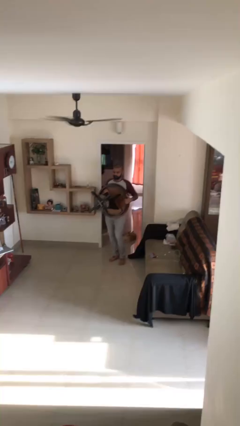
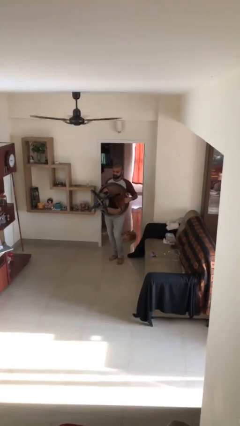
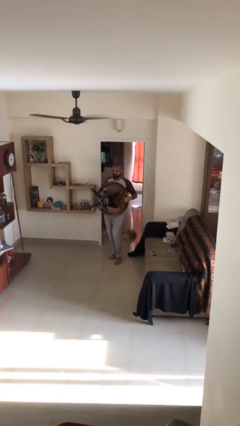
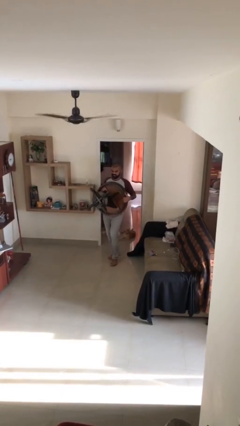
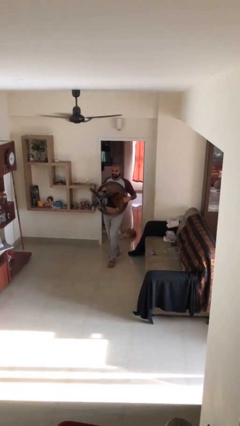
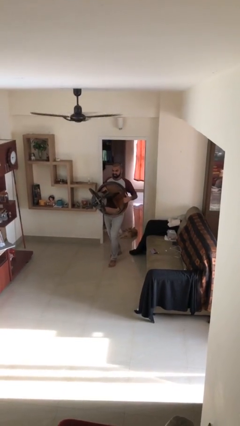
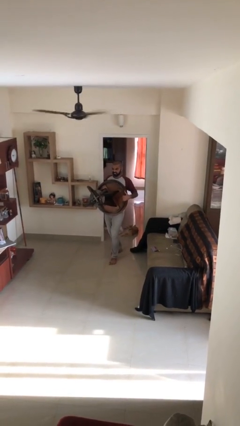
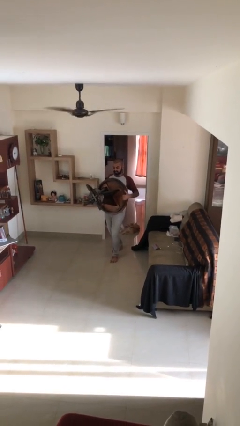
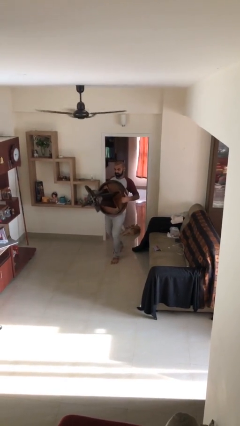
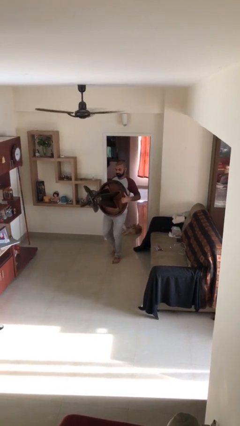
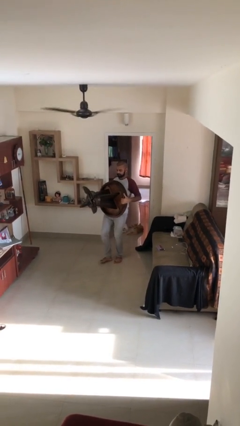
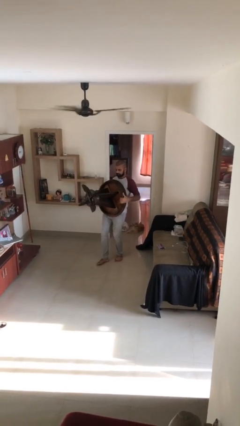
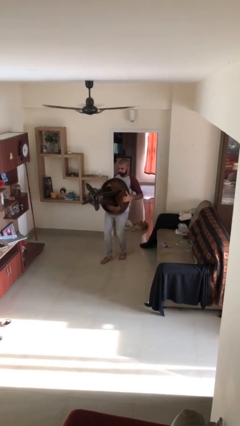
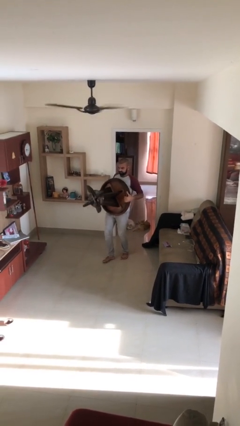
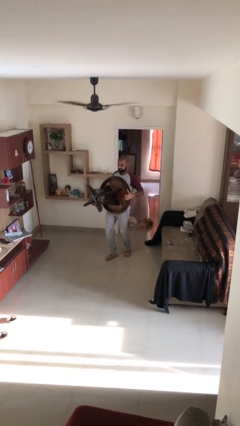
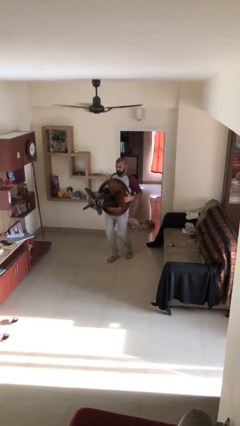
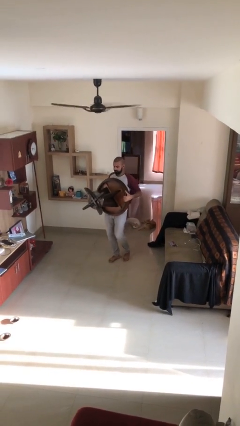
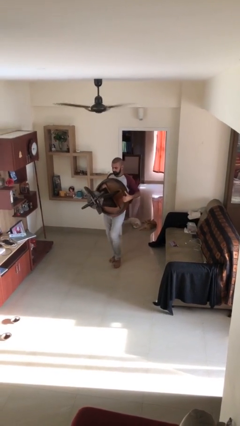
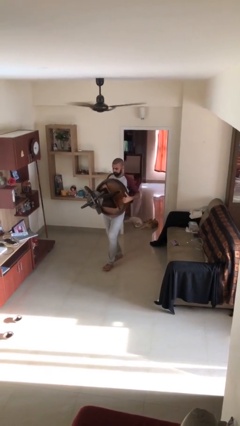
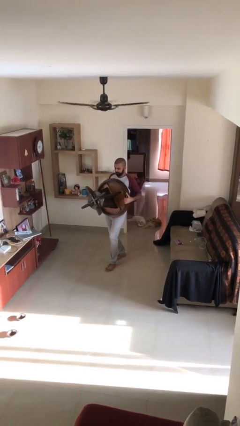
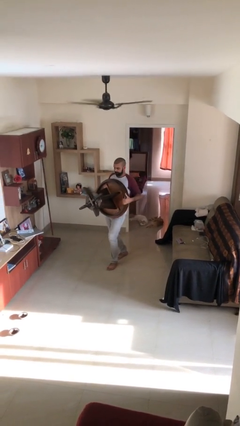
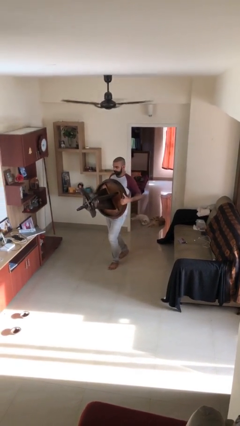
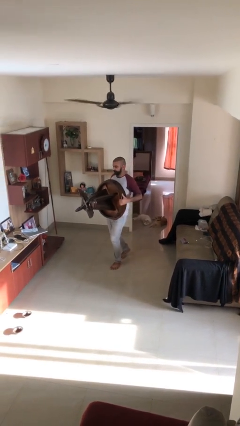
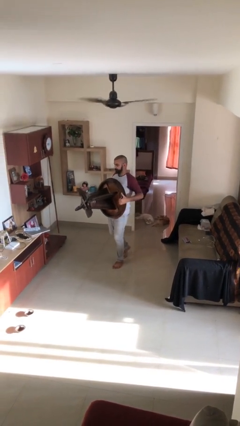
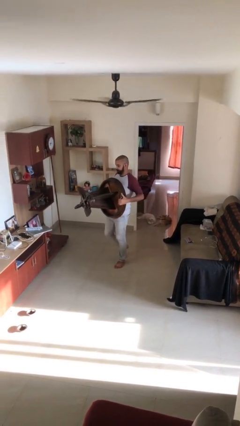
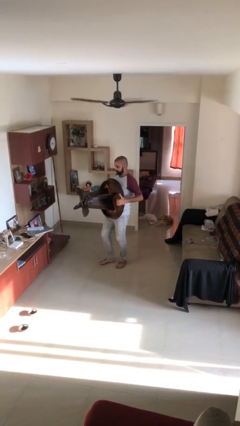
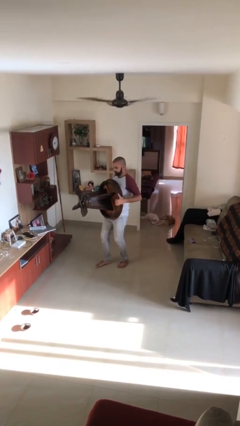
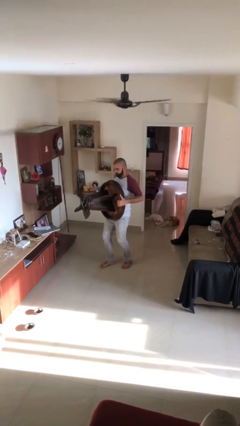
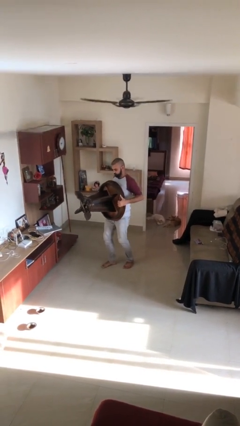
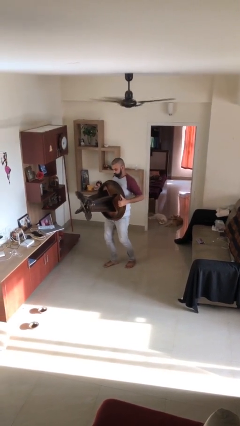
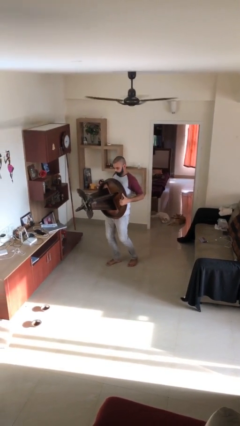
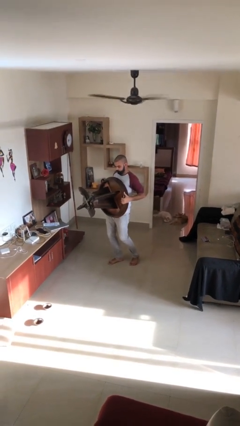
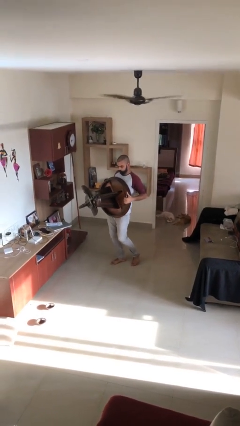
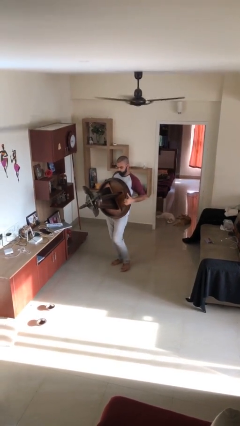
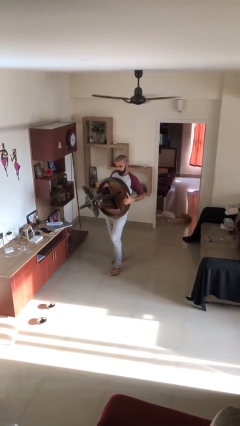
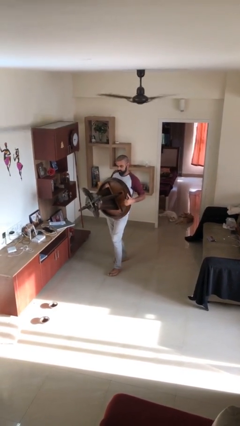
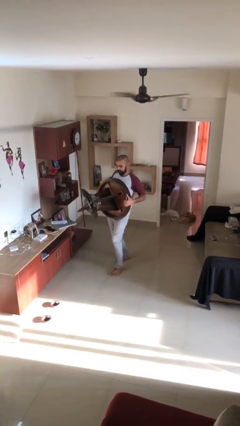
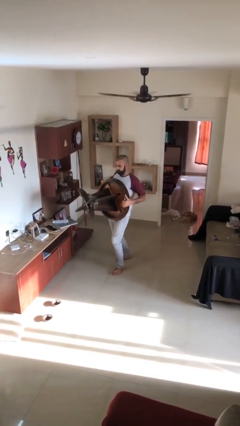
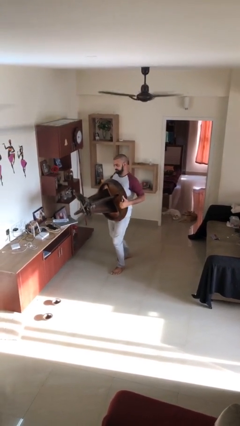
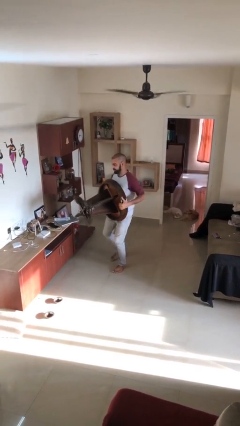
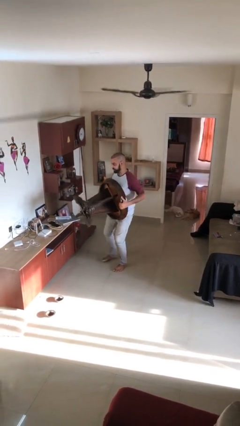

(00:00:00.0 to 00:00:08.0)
person carries heavy object

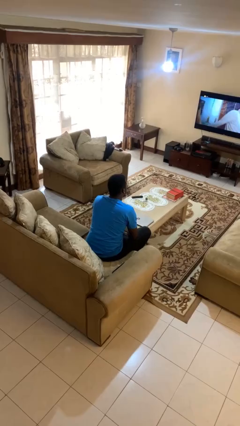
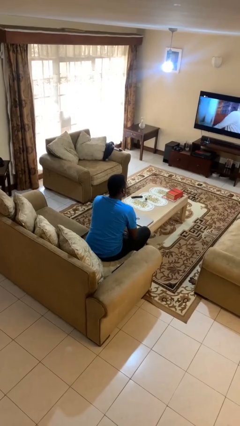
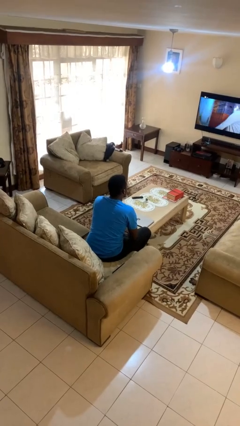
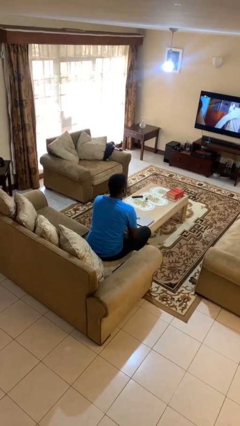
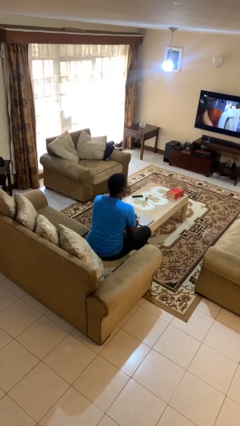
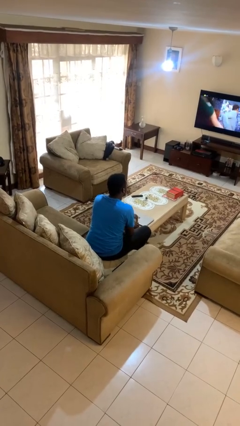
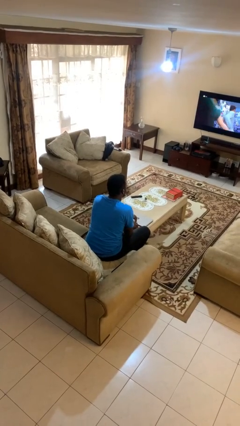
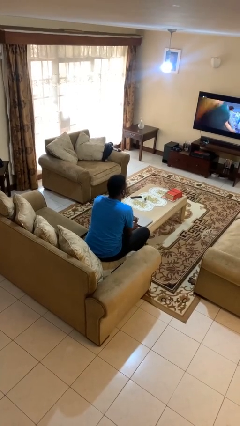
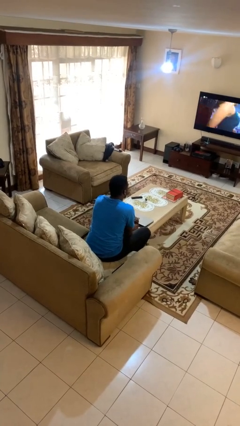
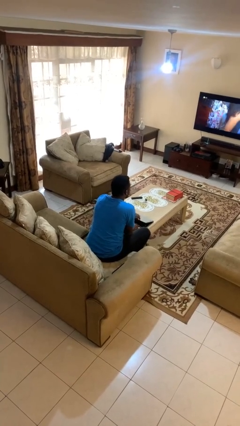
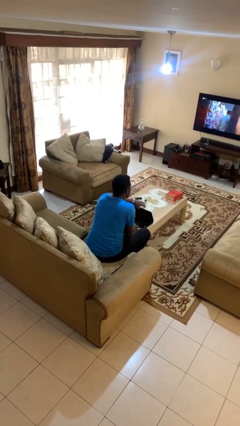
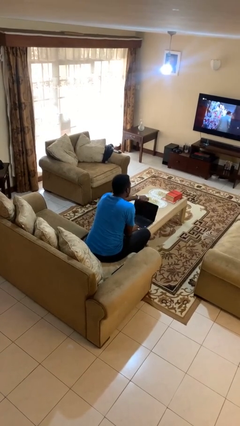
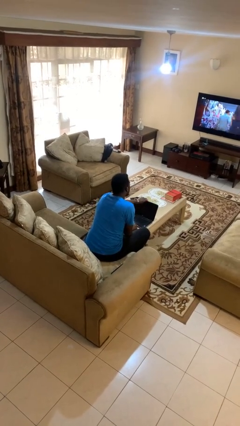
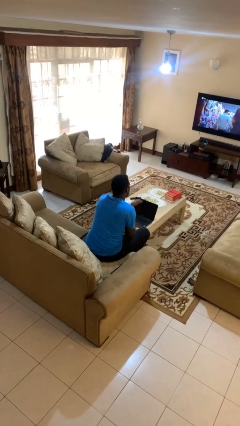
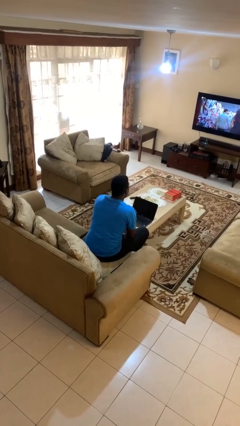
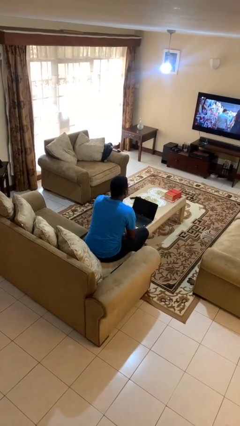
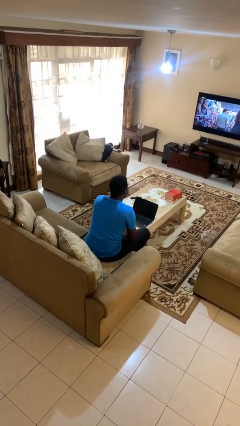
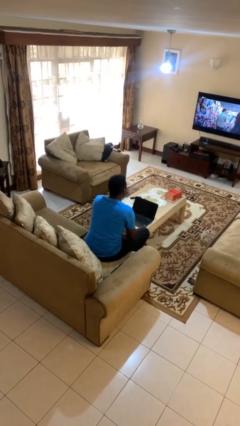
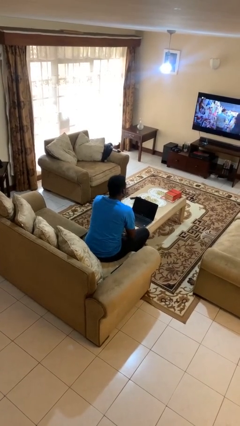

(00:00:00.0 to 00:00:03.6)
person opens laptop

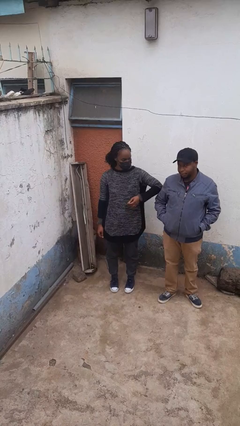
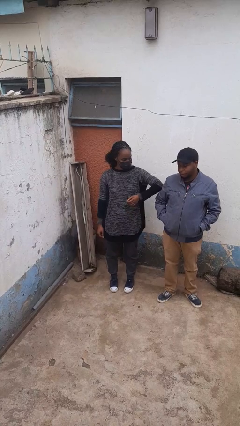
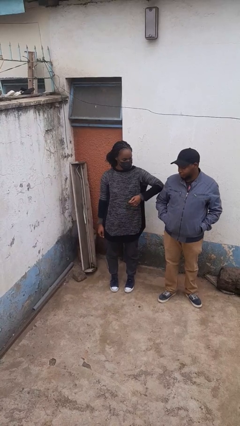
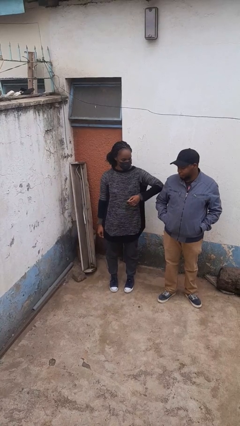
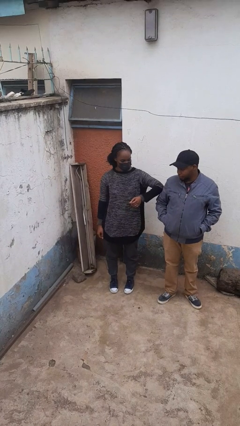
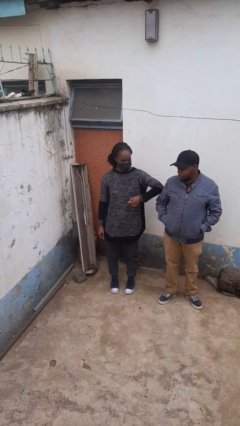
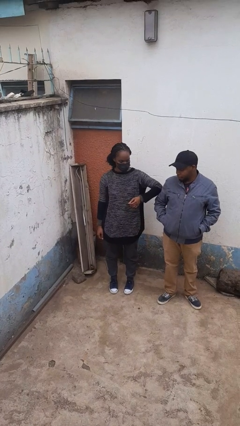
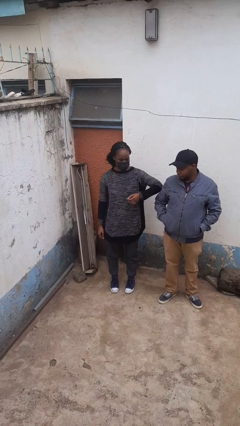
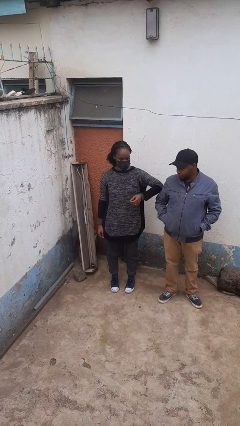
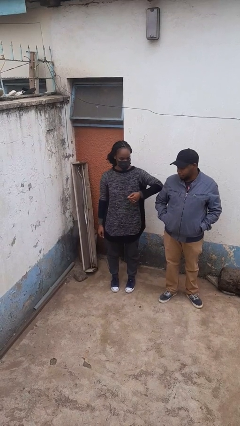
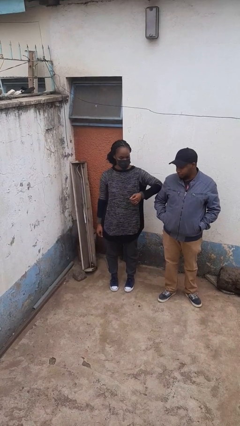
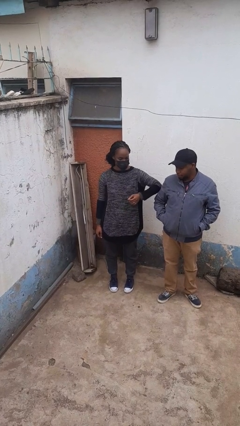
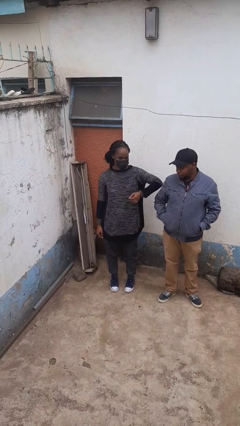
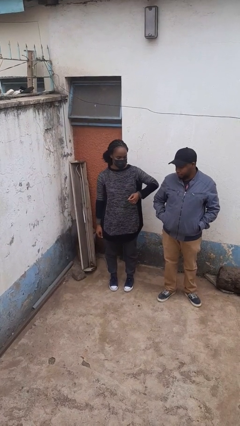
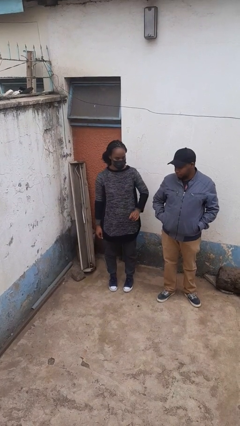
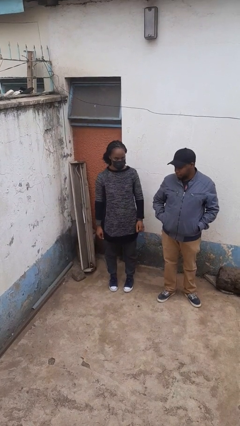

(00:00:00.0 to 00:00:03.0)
person nudges person with elbow

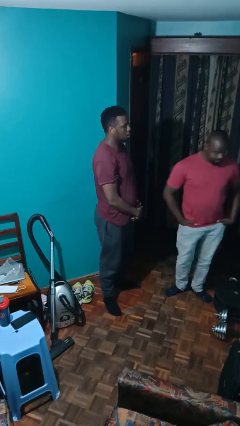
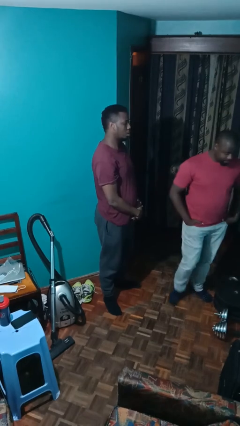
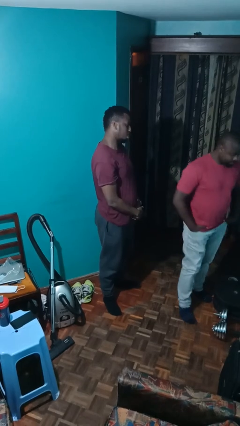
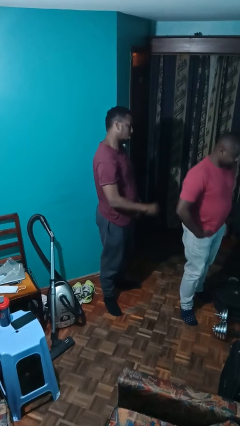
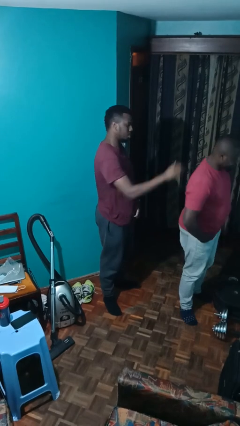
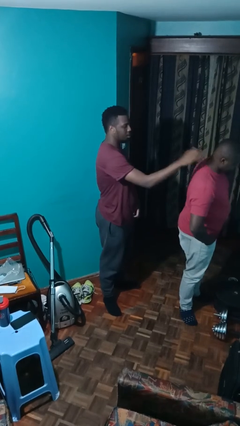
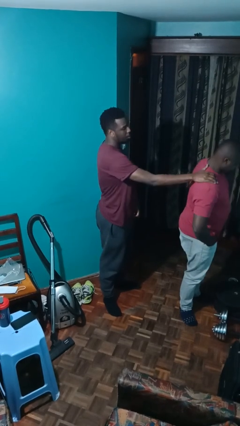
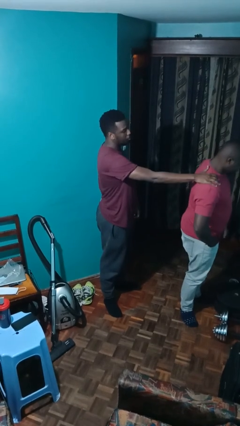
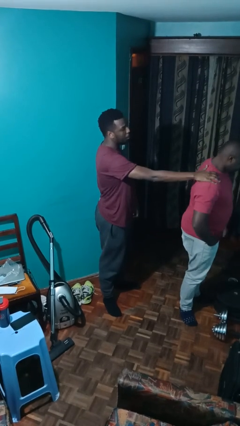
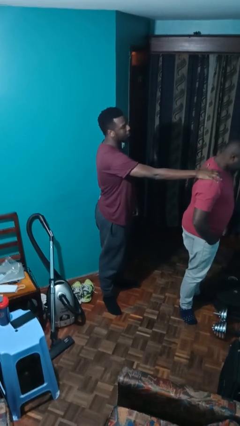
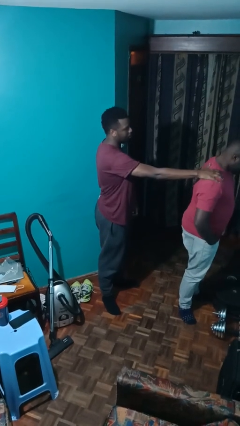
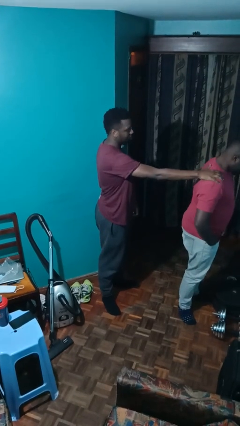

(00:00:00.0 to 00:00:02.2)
person grabs person by shoulder

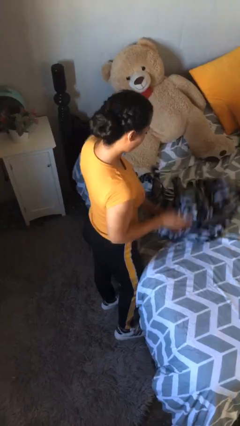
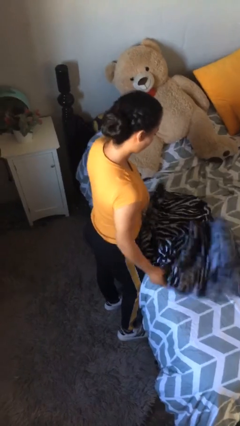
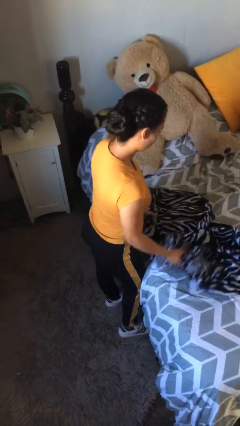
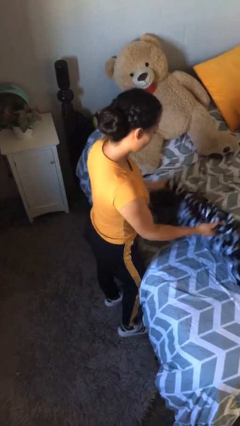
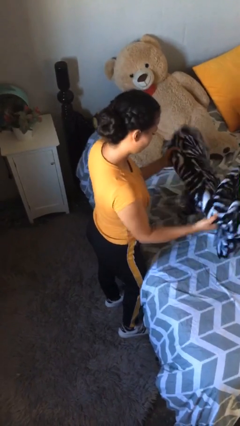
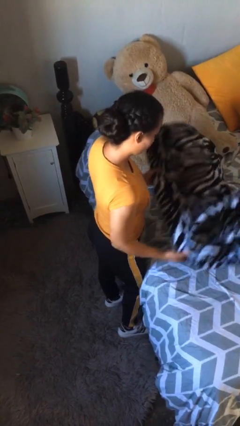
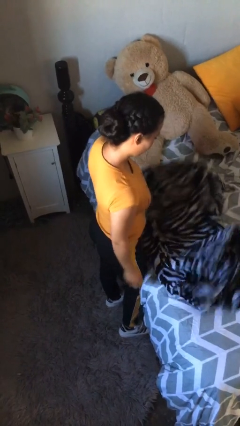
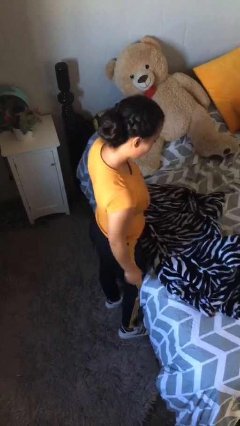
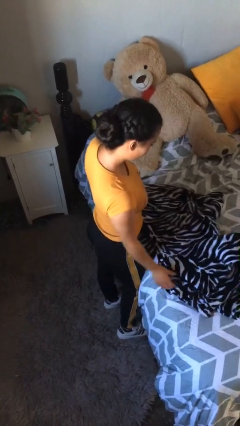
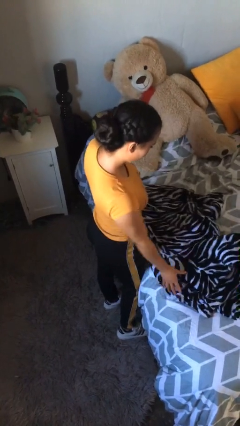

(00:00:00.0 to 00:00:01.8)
person unfolds blanket
